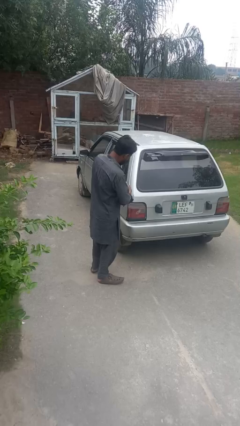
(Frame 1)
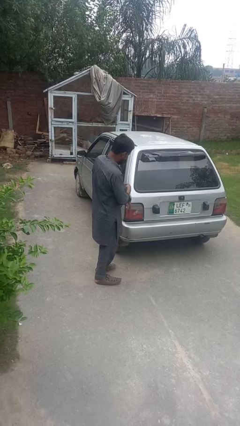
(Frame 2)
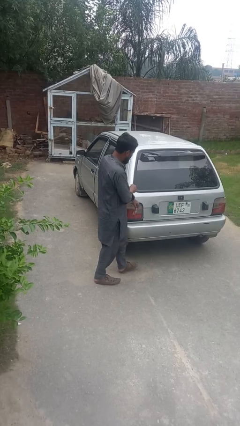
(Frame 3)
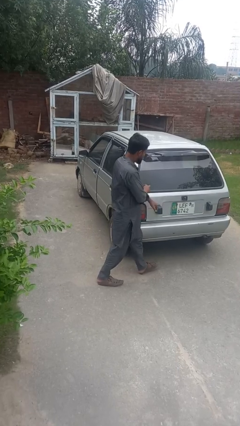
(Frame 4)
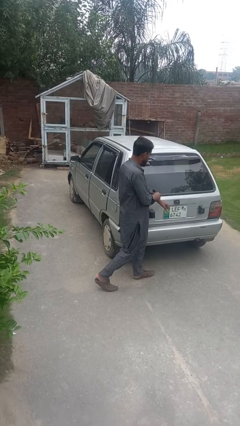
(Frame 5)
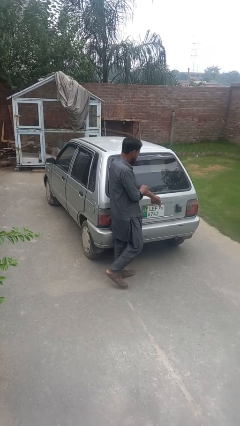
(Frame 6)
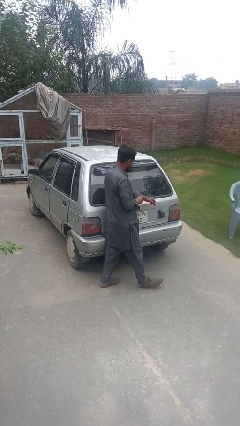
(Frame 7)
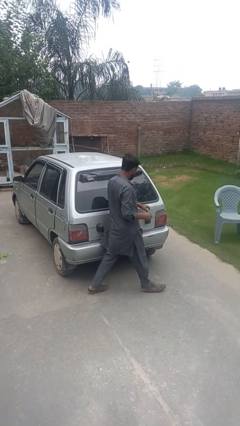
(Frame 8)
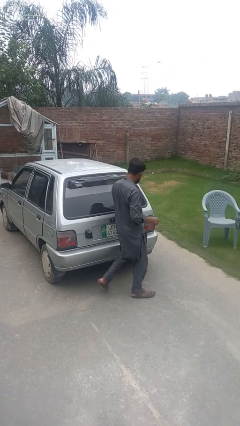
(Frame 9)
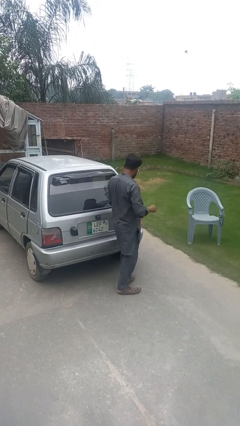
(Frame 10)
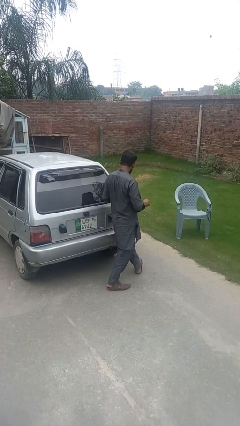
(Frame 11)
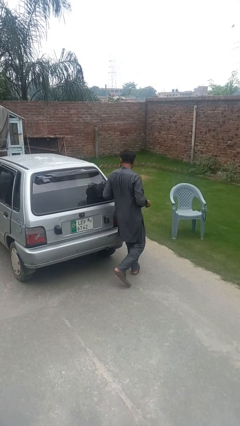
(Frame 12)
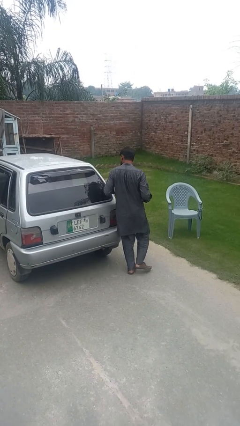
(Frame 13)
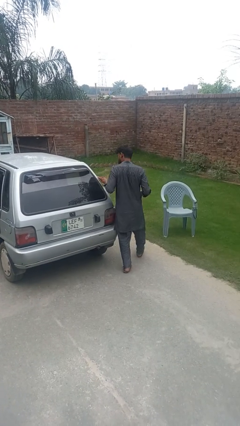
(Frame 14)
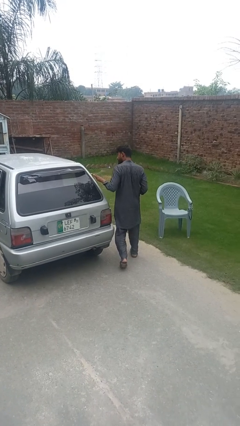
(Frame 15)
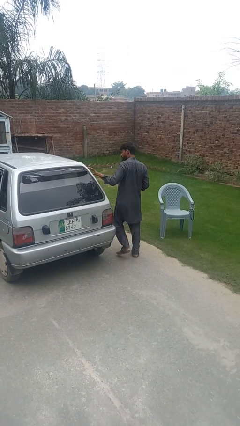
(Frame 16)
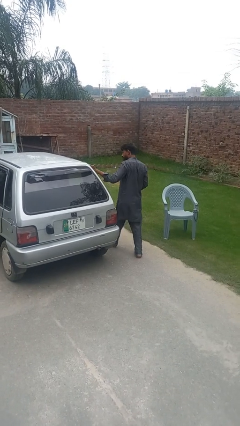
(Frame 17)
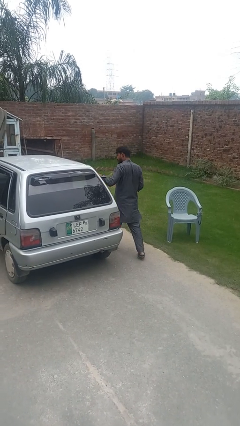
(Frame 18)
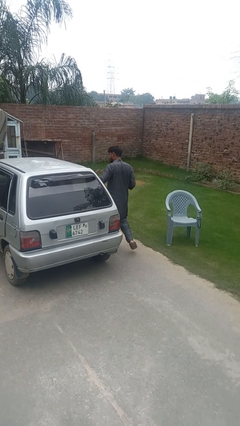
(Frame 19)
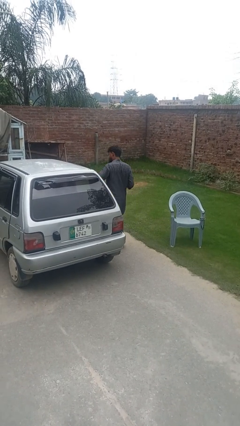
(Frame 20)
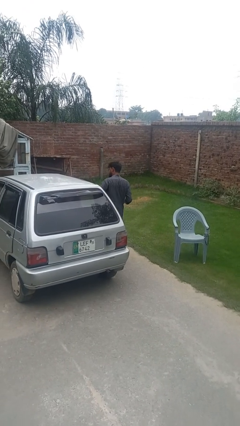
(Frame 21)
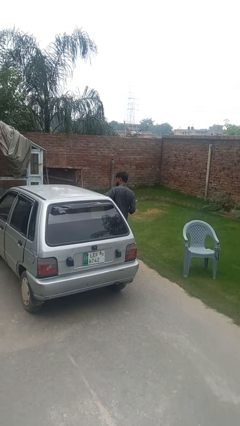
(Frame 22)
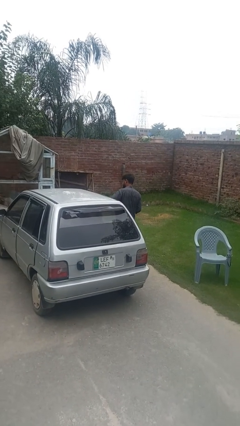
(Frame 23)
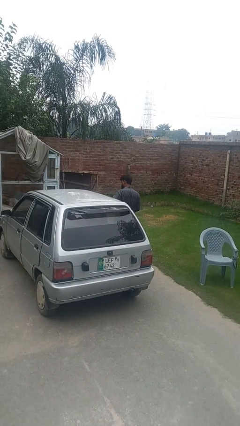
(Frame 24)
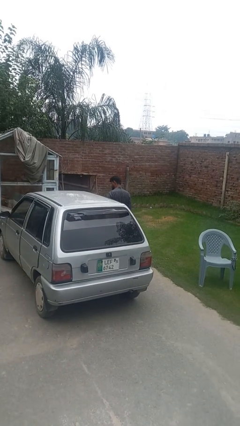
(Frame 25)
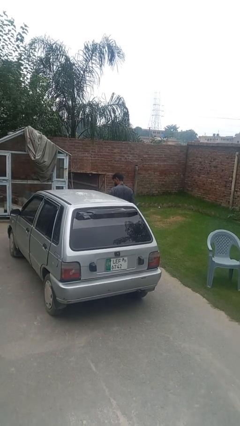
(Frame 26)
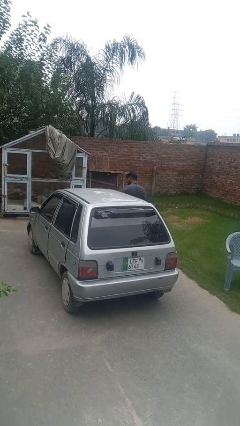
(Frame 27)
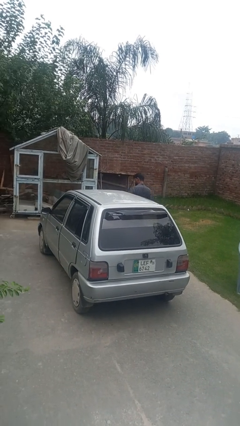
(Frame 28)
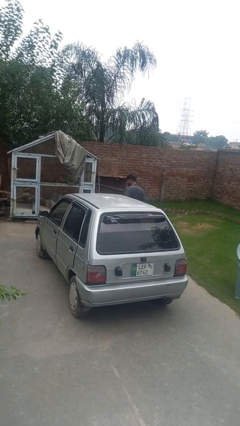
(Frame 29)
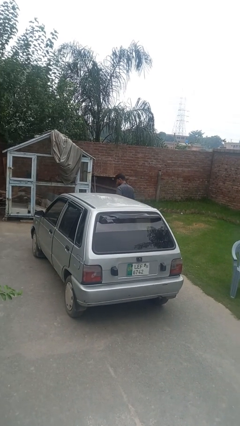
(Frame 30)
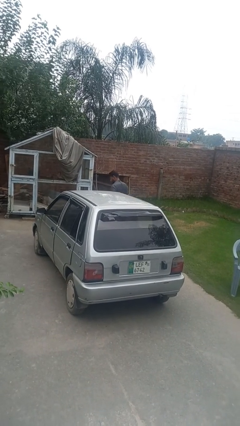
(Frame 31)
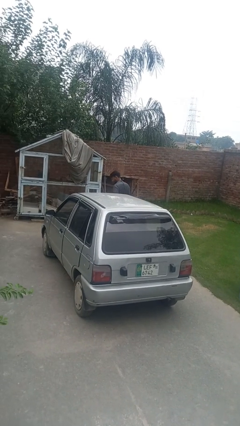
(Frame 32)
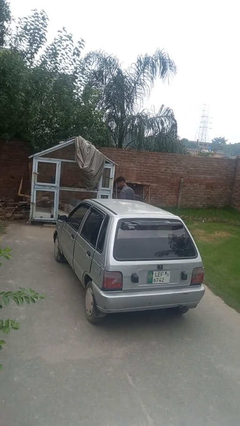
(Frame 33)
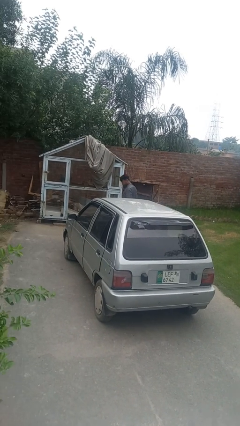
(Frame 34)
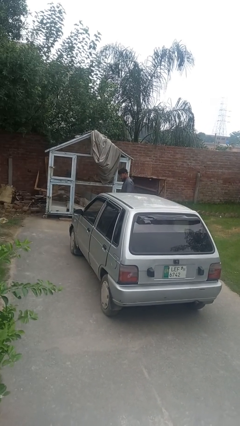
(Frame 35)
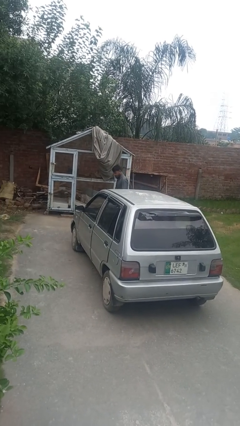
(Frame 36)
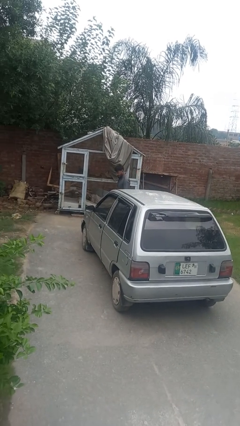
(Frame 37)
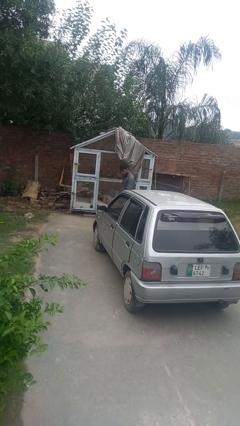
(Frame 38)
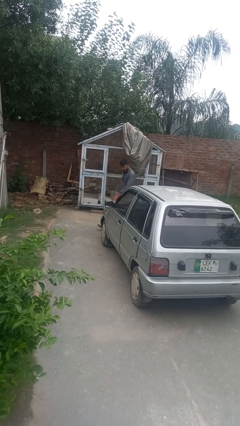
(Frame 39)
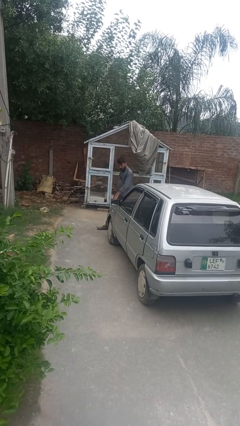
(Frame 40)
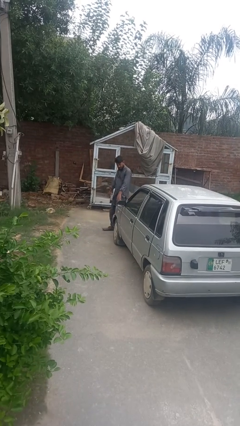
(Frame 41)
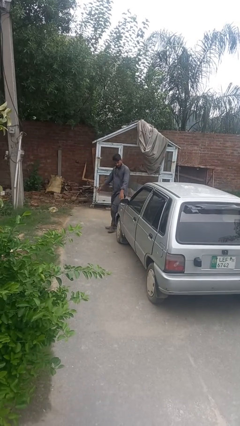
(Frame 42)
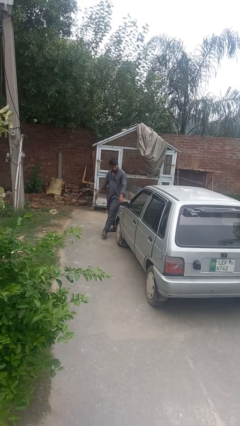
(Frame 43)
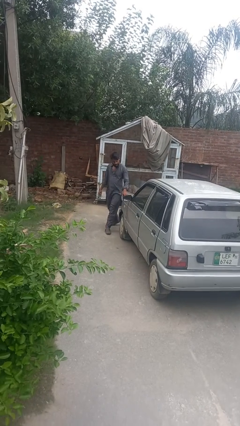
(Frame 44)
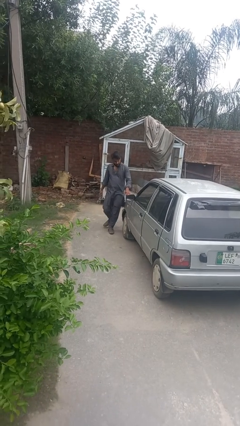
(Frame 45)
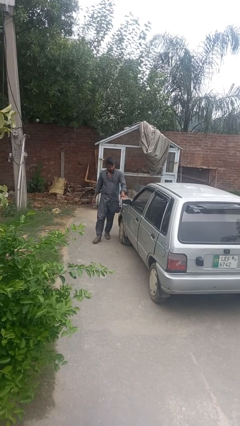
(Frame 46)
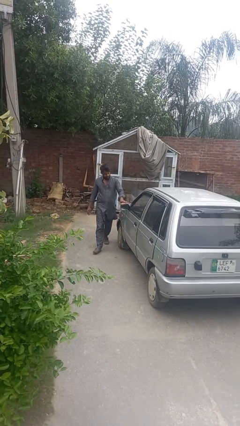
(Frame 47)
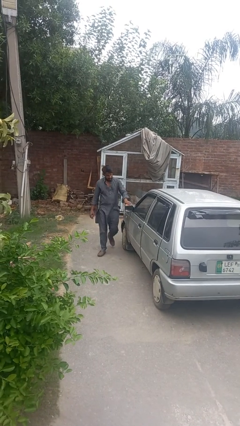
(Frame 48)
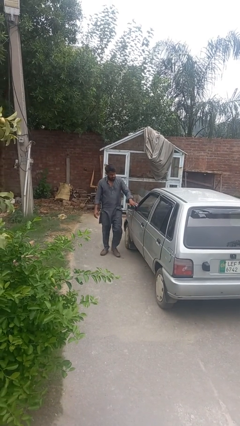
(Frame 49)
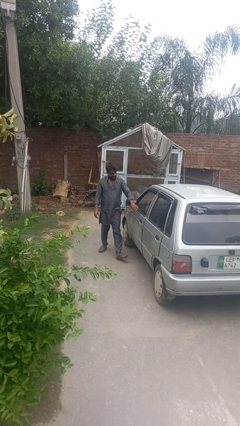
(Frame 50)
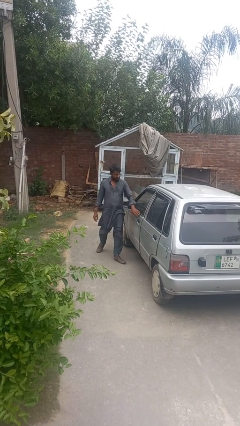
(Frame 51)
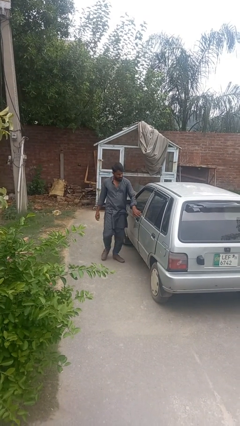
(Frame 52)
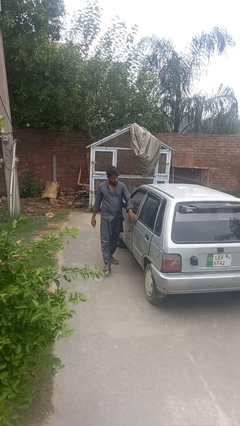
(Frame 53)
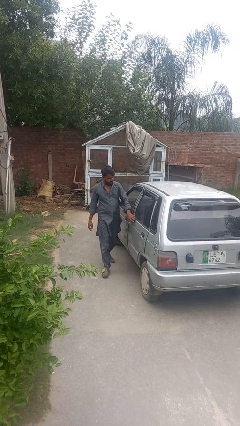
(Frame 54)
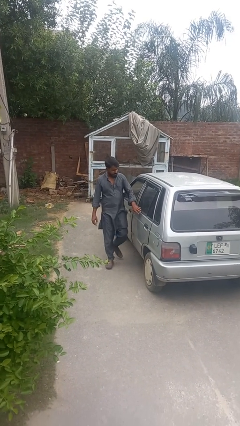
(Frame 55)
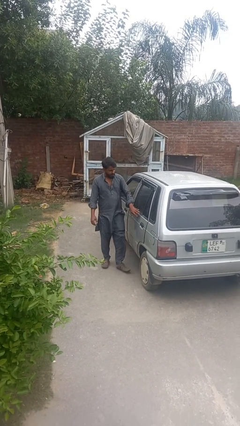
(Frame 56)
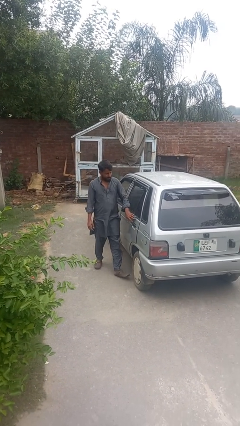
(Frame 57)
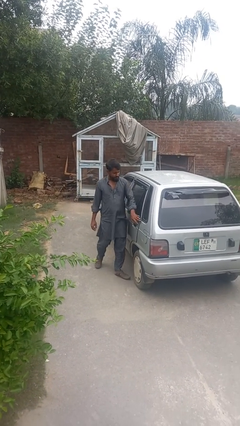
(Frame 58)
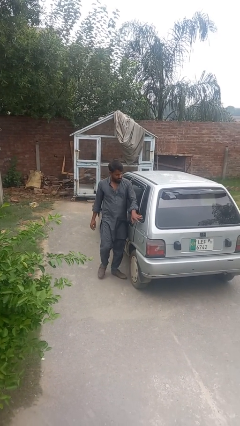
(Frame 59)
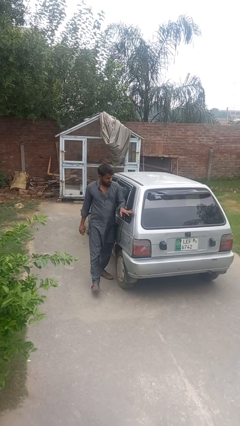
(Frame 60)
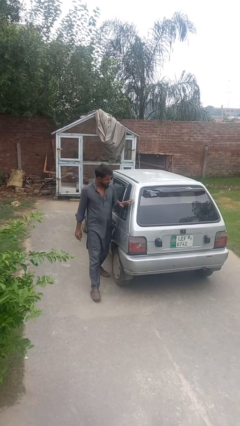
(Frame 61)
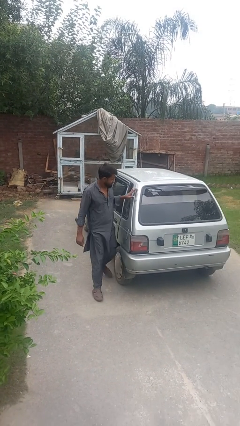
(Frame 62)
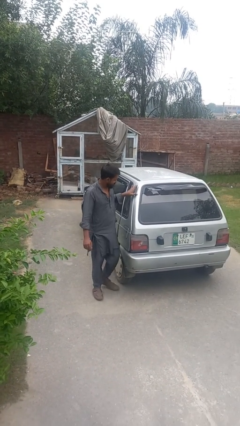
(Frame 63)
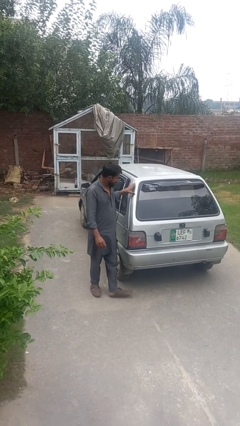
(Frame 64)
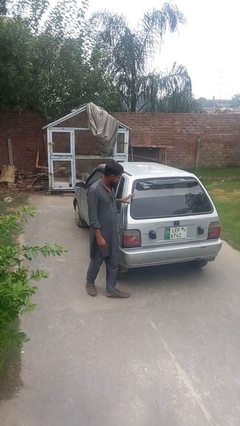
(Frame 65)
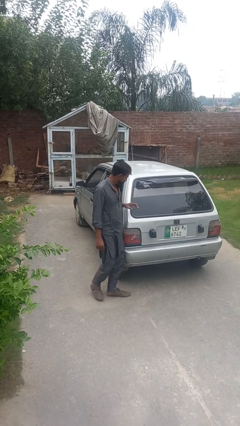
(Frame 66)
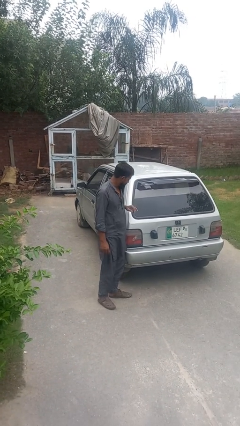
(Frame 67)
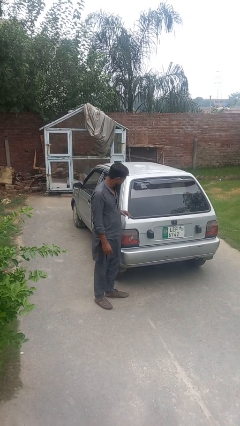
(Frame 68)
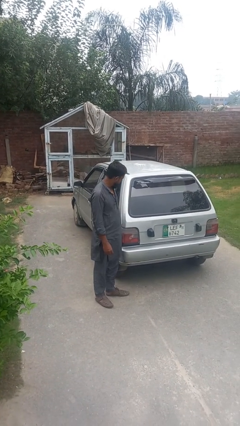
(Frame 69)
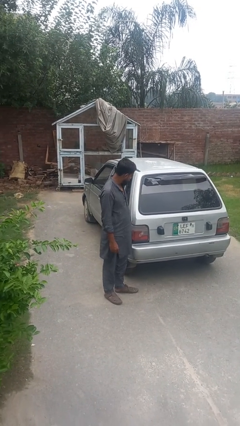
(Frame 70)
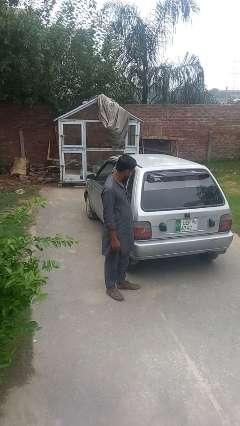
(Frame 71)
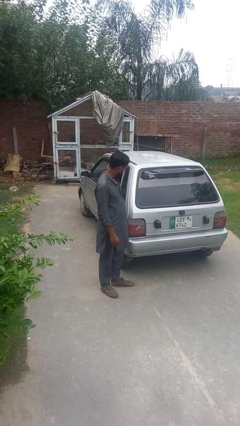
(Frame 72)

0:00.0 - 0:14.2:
person walks around car

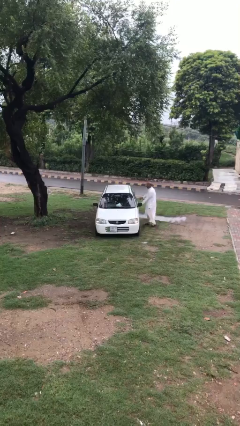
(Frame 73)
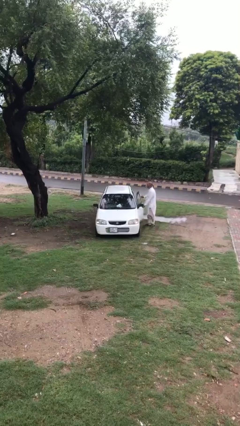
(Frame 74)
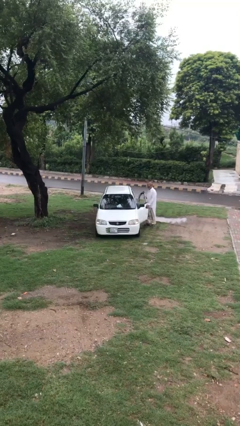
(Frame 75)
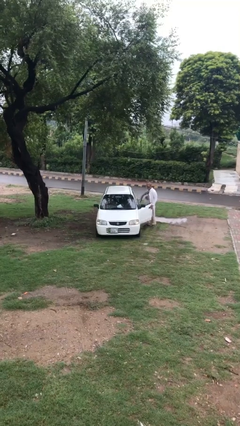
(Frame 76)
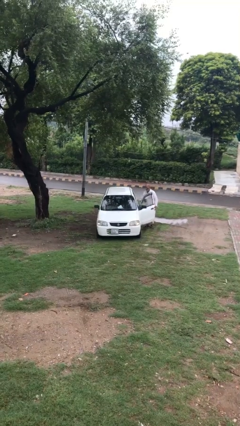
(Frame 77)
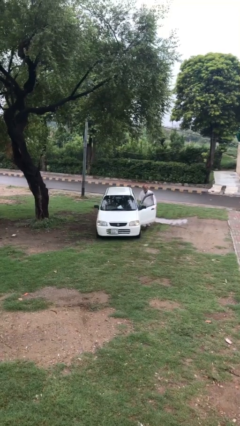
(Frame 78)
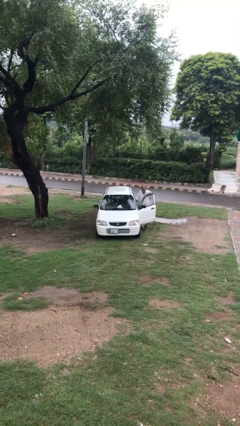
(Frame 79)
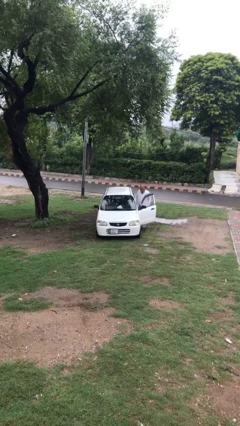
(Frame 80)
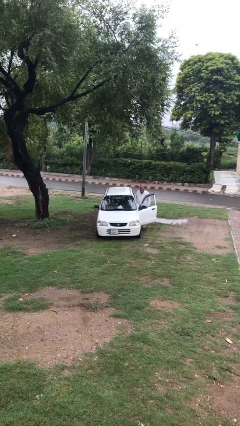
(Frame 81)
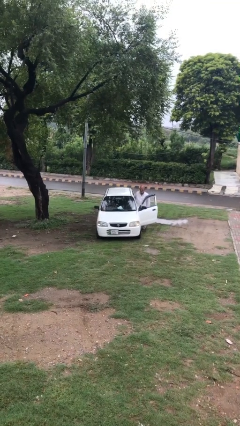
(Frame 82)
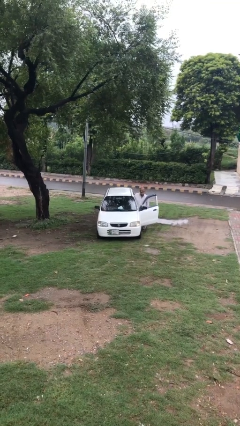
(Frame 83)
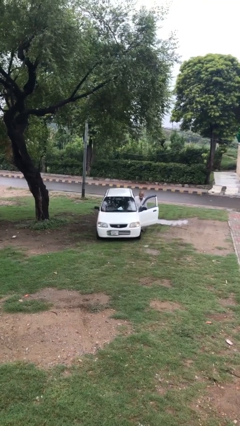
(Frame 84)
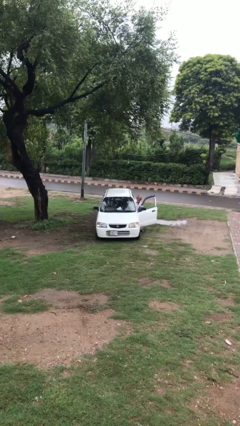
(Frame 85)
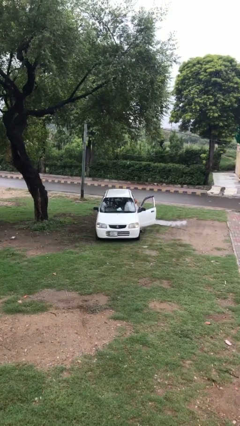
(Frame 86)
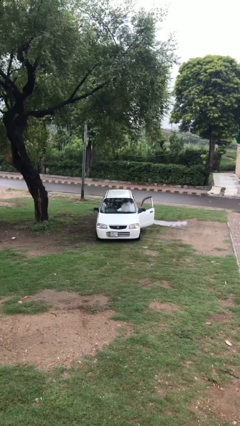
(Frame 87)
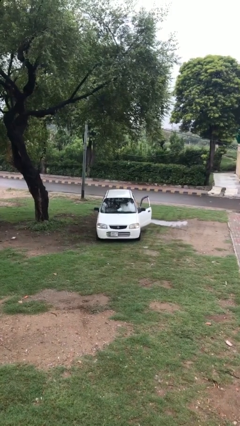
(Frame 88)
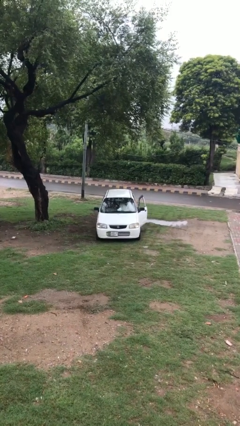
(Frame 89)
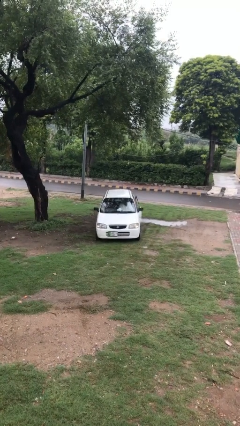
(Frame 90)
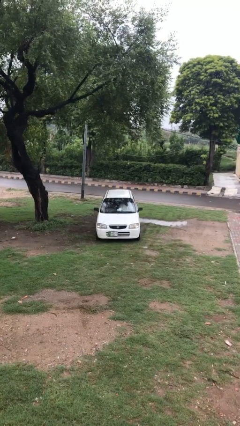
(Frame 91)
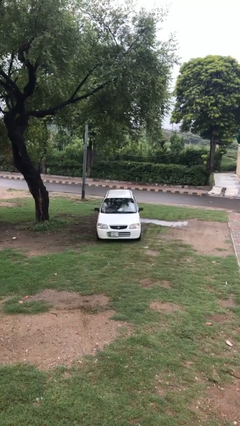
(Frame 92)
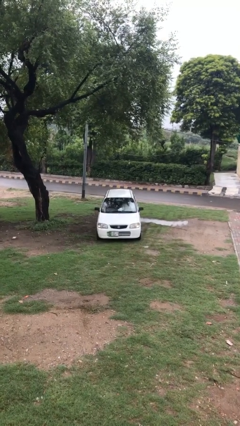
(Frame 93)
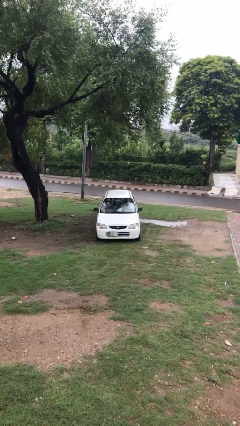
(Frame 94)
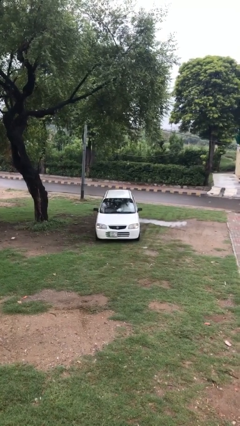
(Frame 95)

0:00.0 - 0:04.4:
car picks up person
